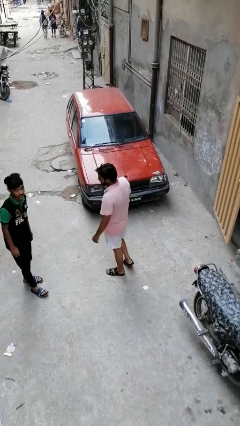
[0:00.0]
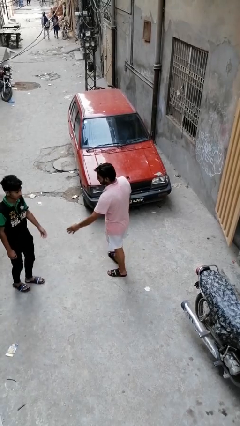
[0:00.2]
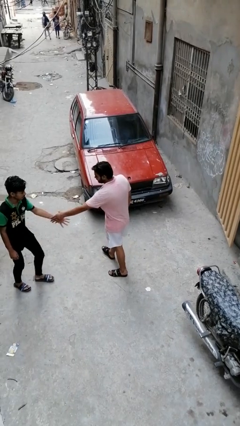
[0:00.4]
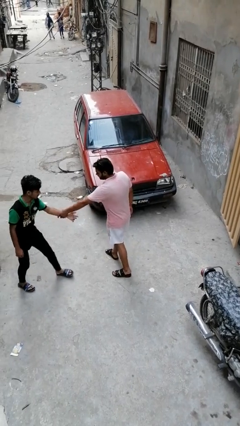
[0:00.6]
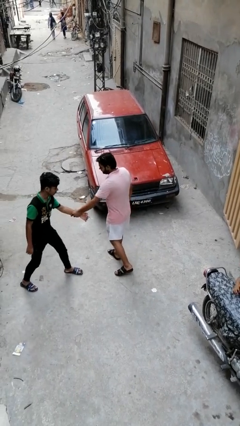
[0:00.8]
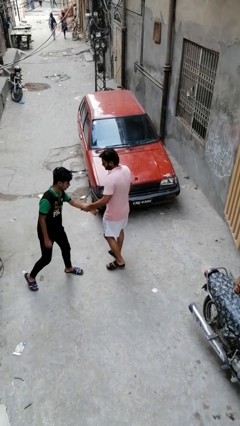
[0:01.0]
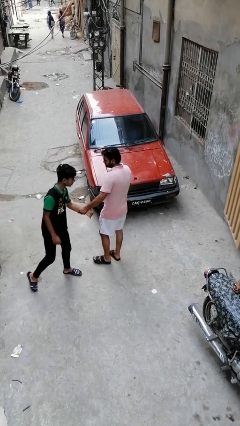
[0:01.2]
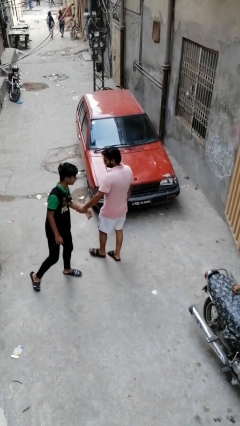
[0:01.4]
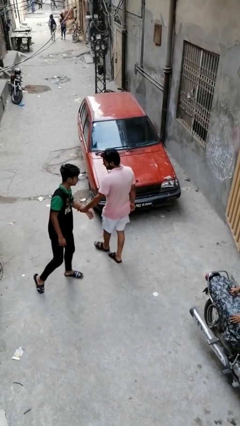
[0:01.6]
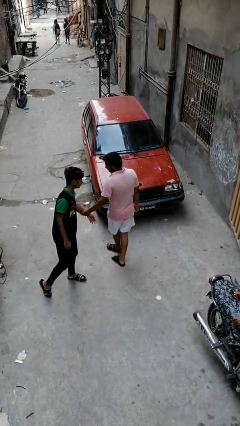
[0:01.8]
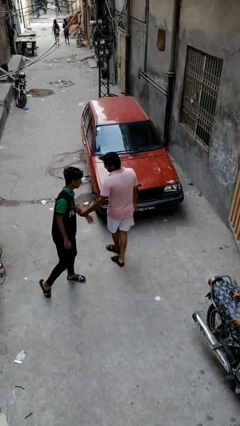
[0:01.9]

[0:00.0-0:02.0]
person grabs person by forearm

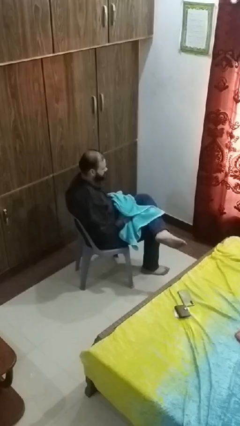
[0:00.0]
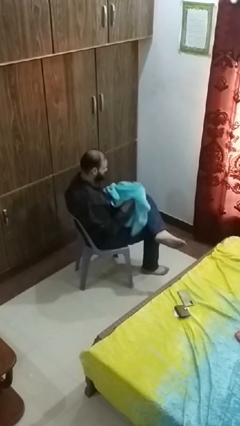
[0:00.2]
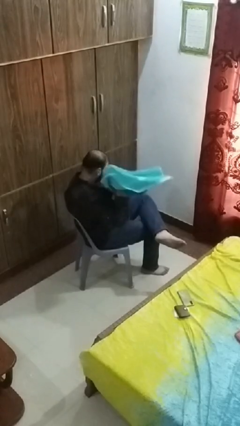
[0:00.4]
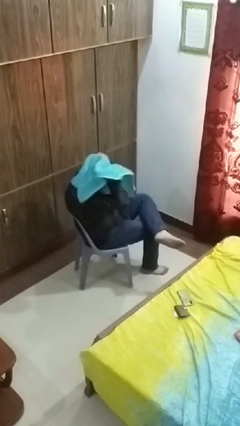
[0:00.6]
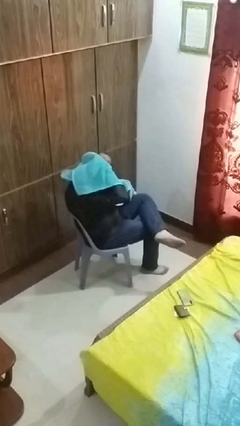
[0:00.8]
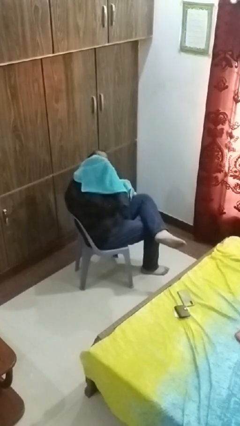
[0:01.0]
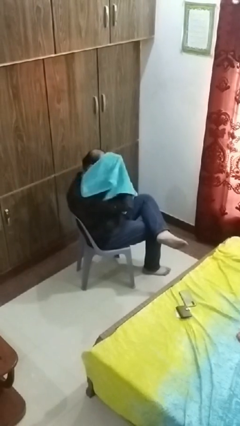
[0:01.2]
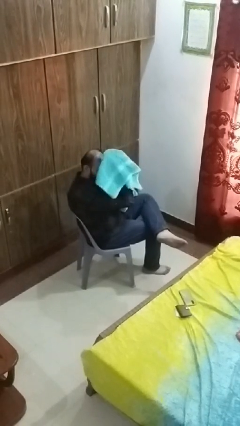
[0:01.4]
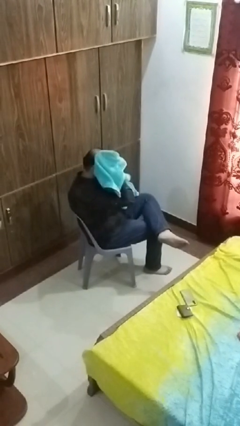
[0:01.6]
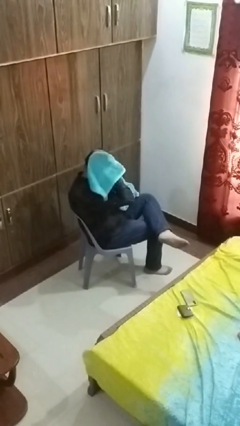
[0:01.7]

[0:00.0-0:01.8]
person dries hair with towel

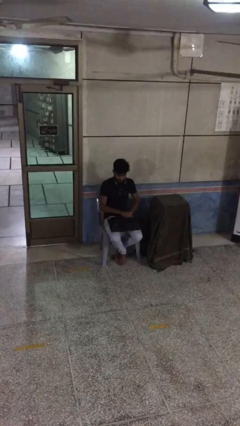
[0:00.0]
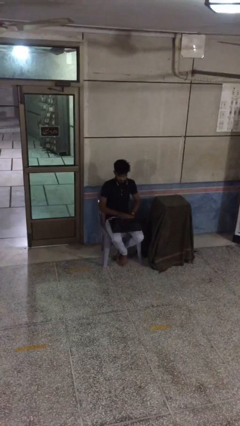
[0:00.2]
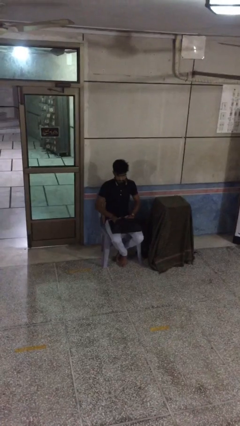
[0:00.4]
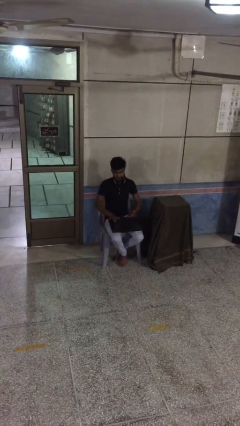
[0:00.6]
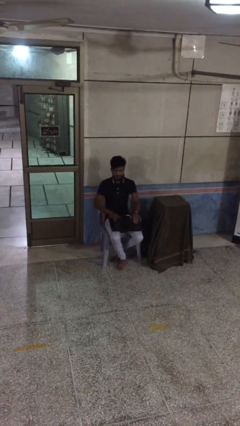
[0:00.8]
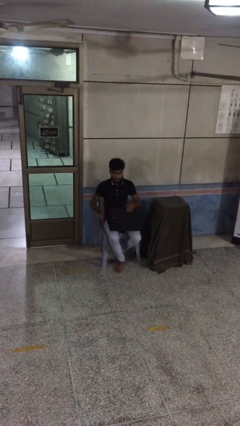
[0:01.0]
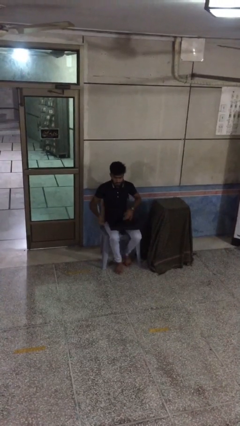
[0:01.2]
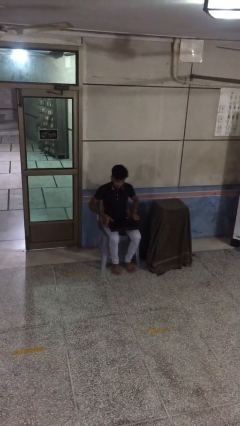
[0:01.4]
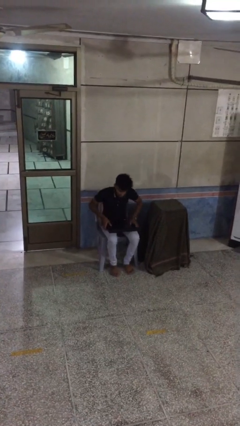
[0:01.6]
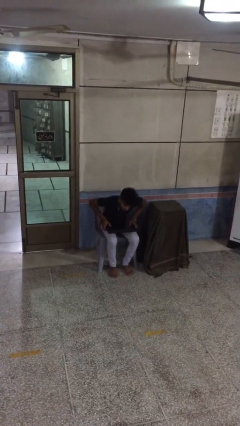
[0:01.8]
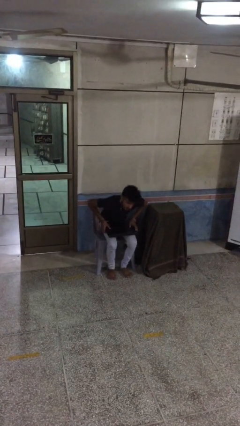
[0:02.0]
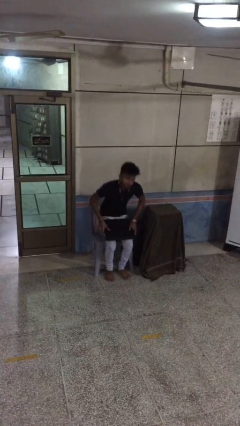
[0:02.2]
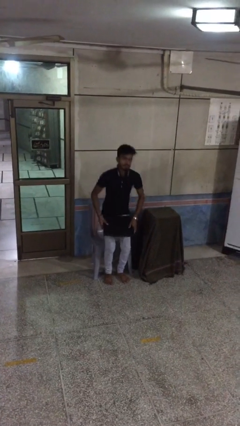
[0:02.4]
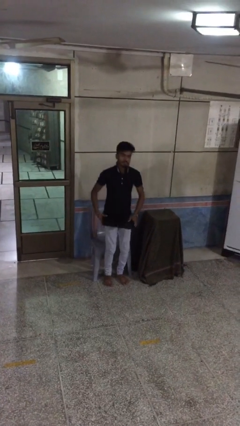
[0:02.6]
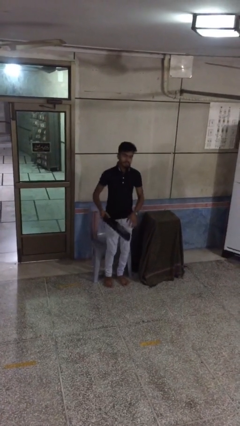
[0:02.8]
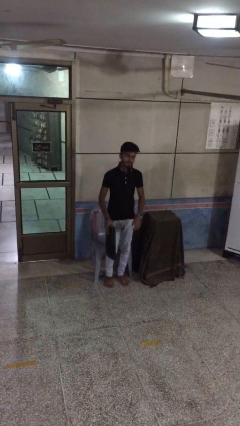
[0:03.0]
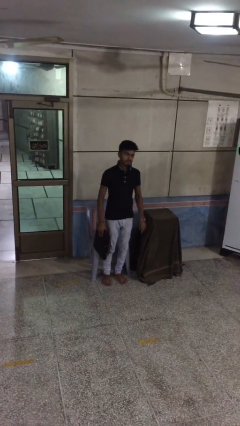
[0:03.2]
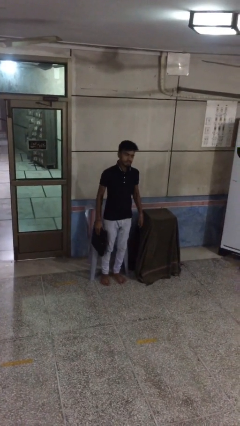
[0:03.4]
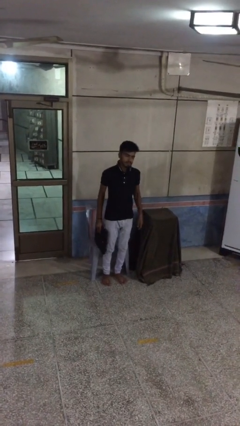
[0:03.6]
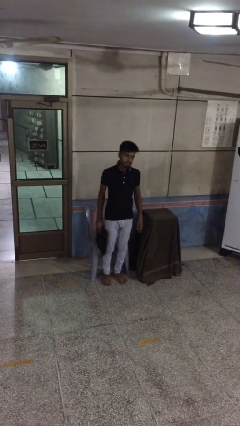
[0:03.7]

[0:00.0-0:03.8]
person stands up

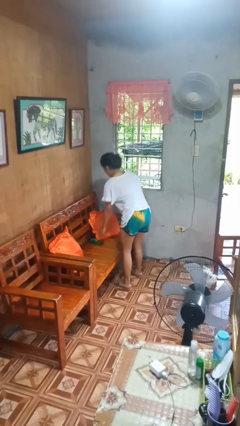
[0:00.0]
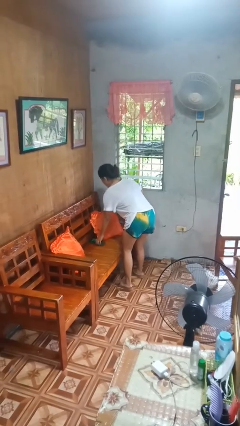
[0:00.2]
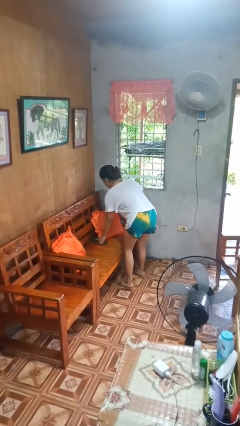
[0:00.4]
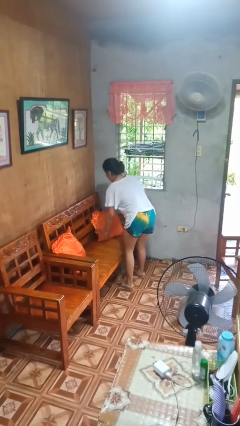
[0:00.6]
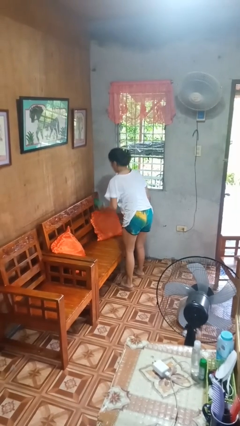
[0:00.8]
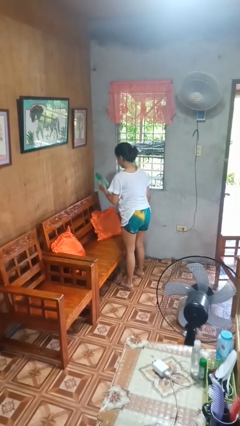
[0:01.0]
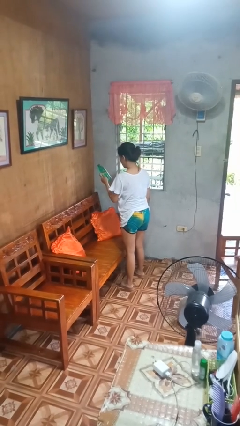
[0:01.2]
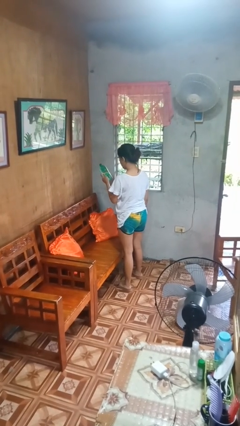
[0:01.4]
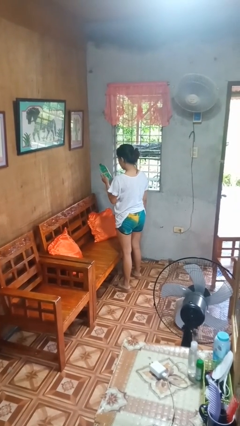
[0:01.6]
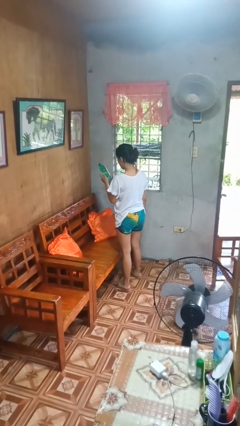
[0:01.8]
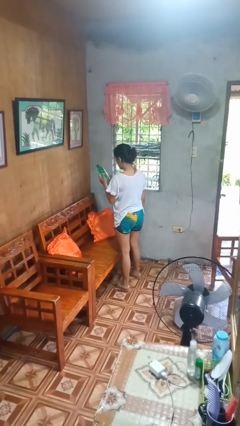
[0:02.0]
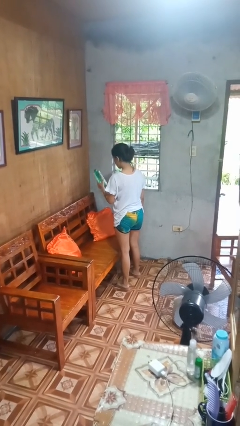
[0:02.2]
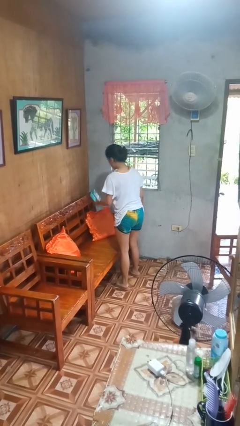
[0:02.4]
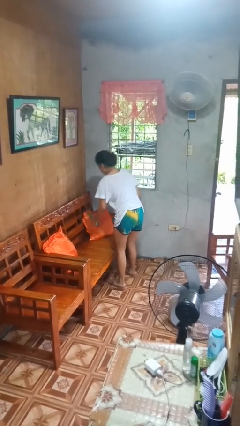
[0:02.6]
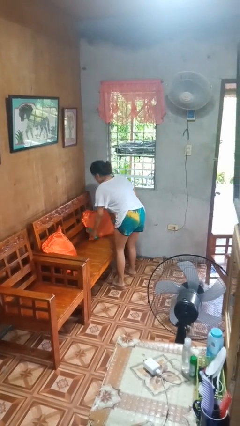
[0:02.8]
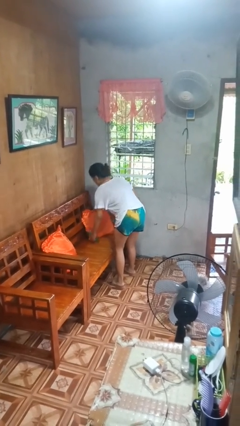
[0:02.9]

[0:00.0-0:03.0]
person picks up object from couch

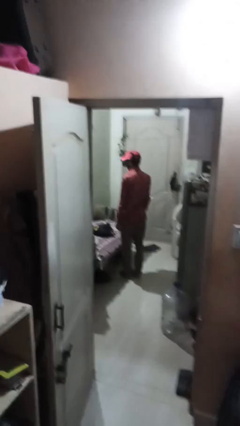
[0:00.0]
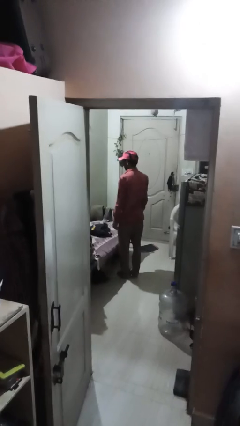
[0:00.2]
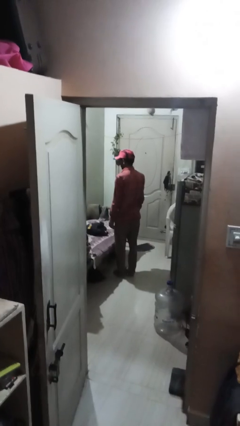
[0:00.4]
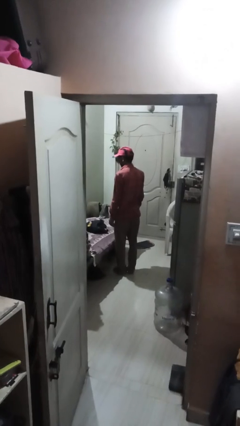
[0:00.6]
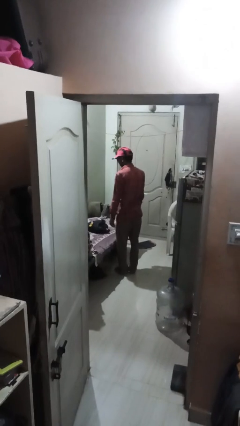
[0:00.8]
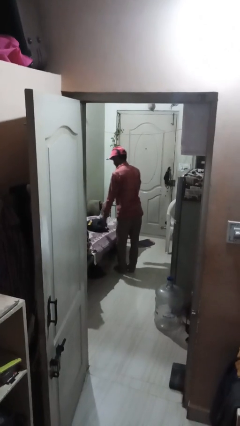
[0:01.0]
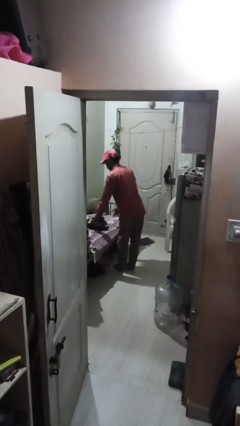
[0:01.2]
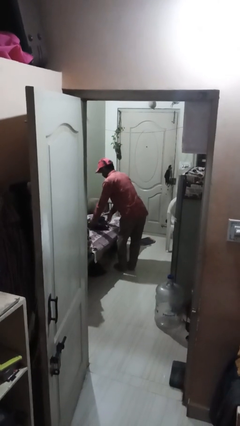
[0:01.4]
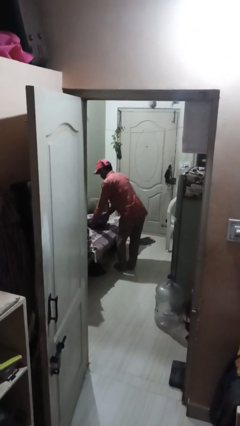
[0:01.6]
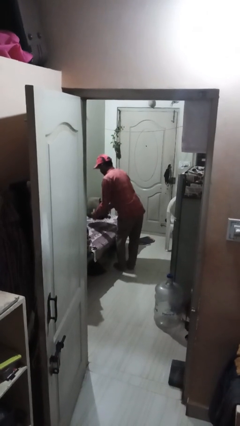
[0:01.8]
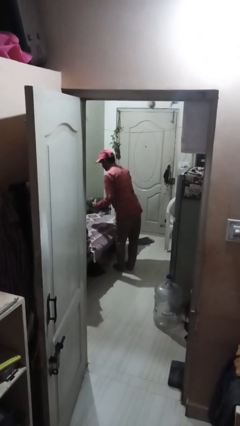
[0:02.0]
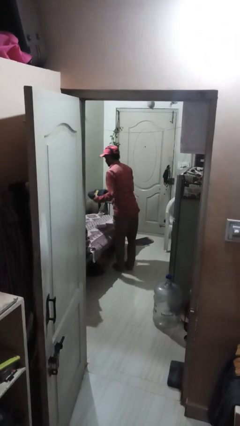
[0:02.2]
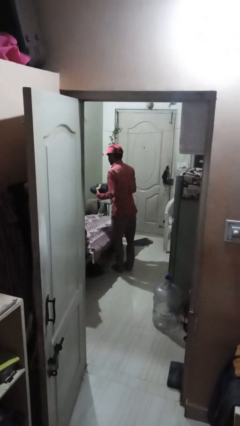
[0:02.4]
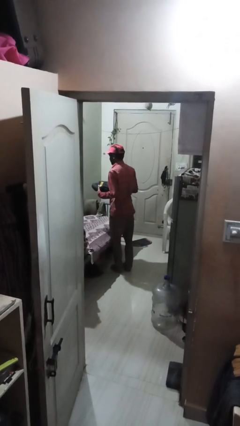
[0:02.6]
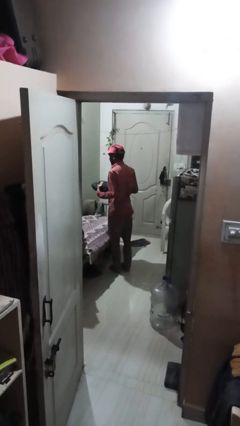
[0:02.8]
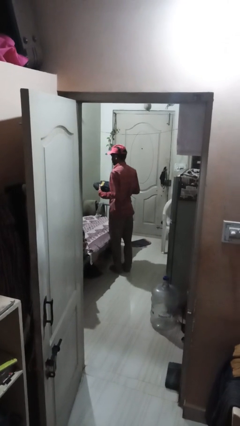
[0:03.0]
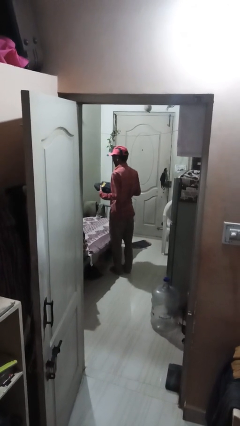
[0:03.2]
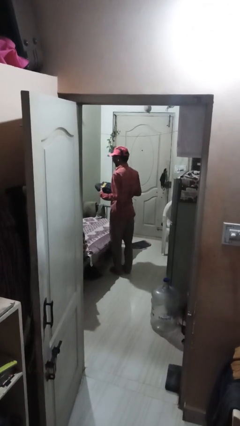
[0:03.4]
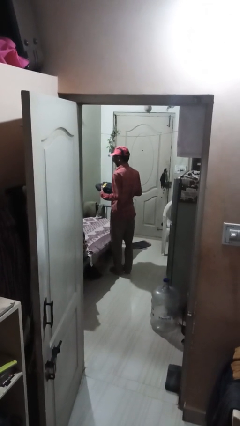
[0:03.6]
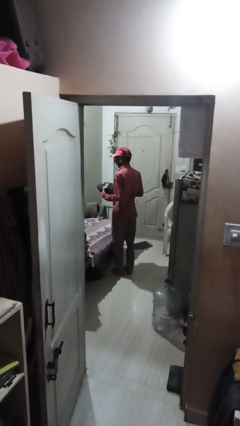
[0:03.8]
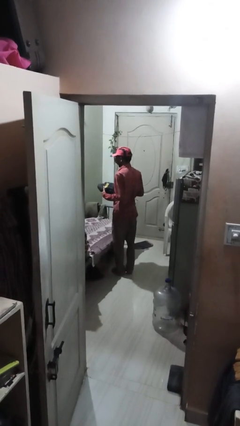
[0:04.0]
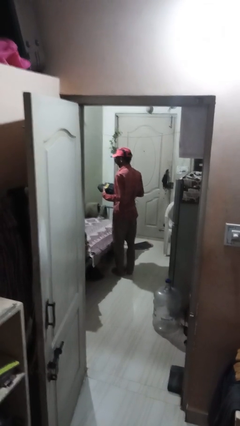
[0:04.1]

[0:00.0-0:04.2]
person picks up object from bed

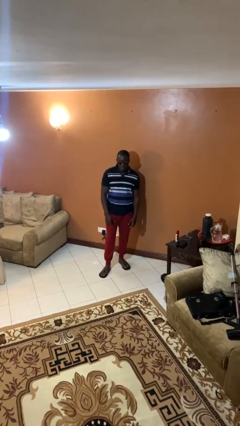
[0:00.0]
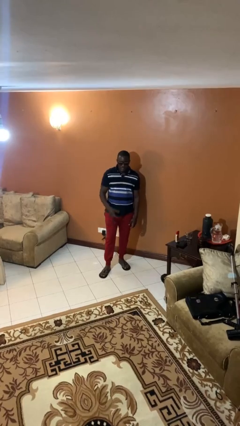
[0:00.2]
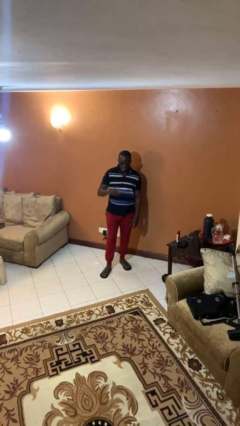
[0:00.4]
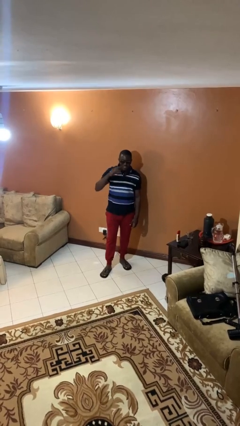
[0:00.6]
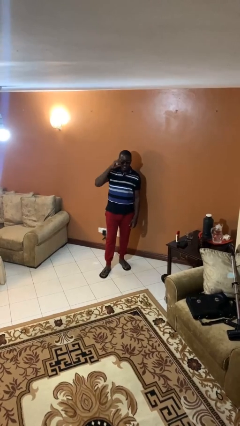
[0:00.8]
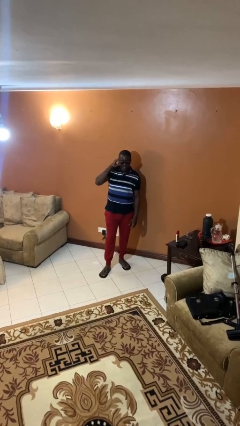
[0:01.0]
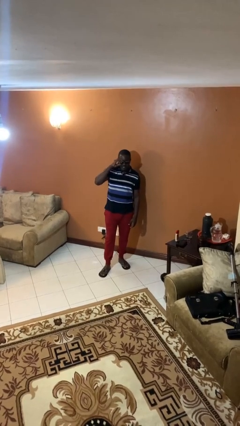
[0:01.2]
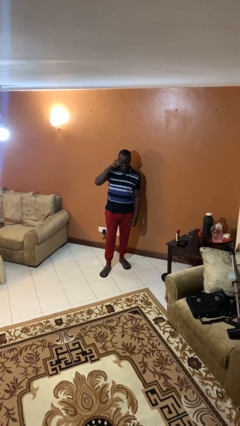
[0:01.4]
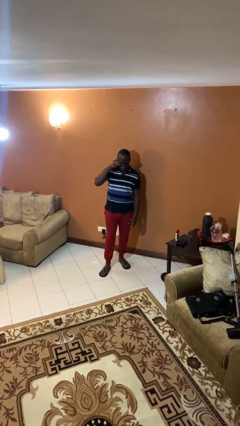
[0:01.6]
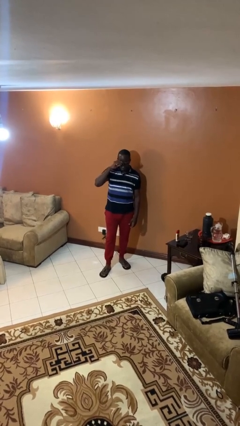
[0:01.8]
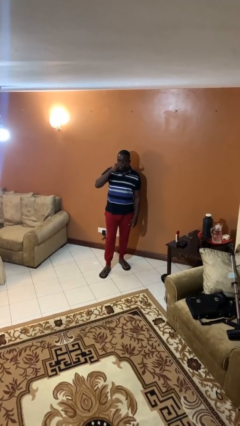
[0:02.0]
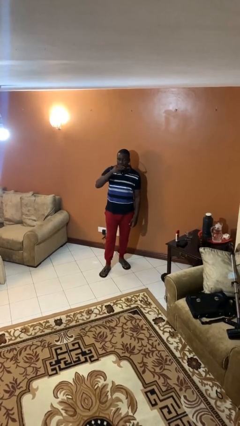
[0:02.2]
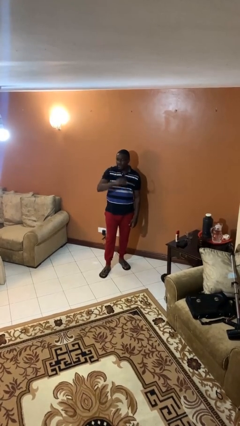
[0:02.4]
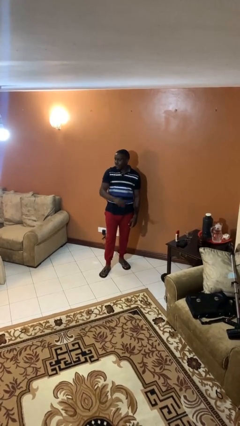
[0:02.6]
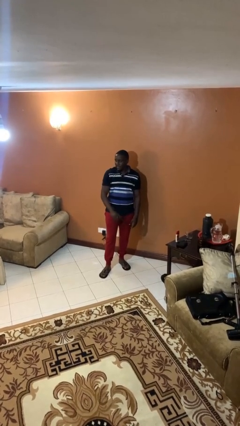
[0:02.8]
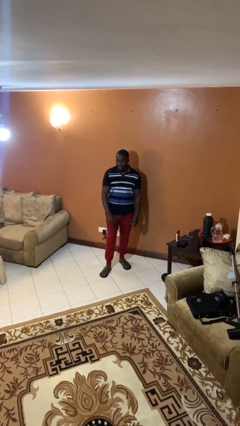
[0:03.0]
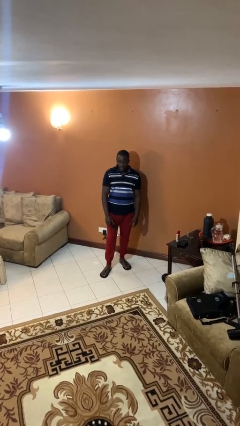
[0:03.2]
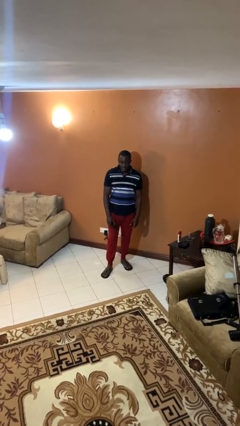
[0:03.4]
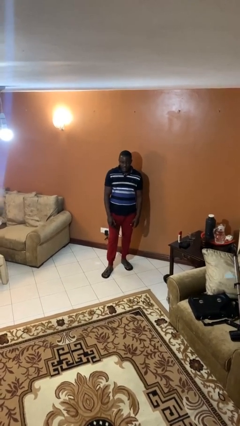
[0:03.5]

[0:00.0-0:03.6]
person takes off sunglasses
